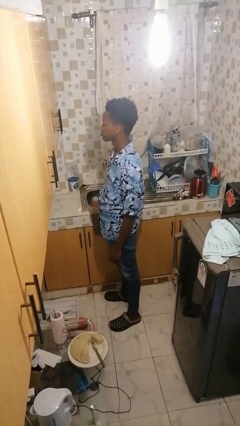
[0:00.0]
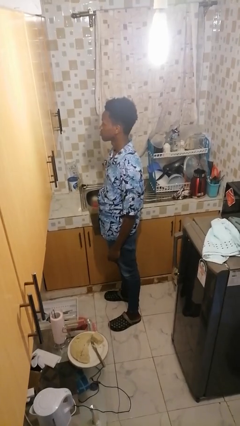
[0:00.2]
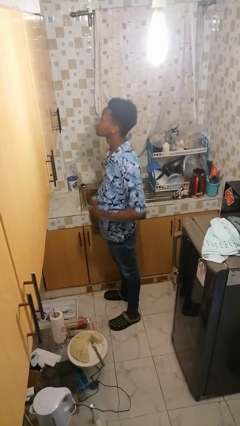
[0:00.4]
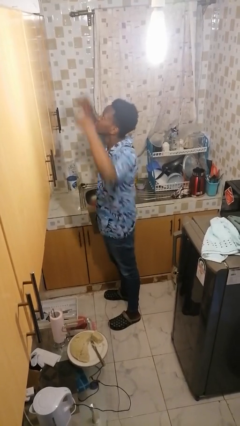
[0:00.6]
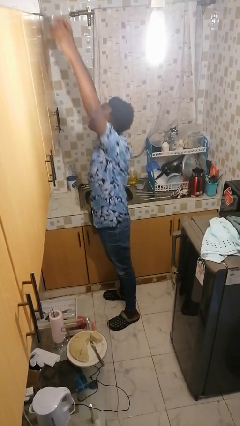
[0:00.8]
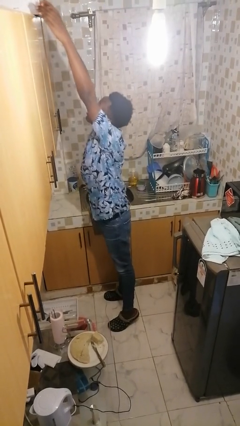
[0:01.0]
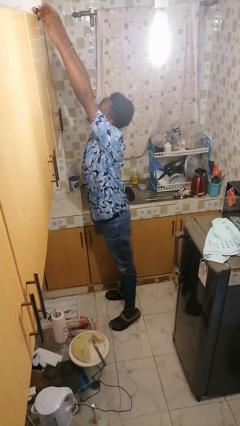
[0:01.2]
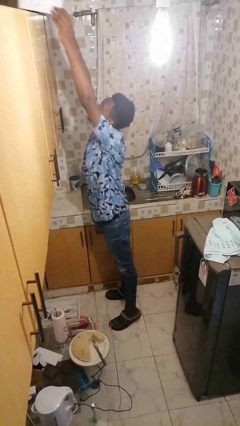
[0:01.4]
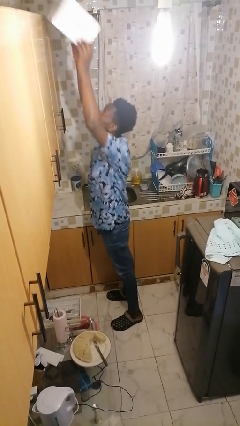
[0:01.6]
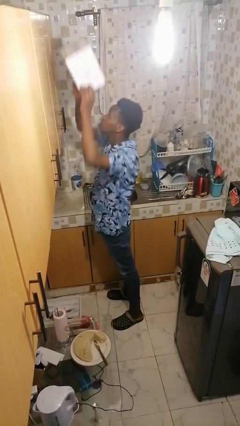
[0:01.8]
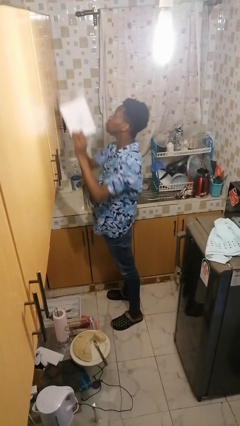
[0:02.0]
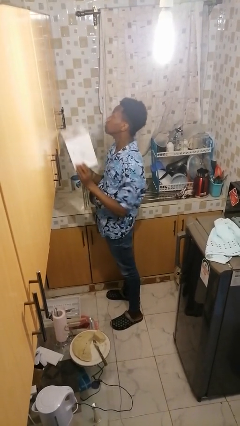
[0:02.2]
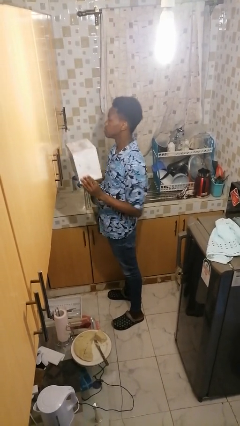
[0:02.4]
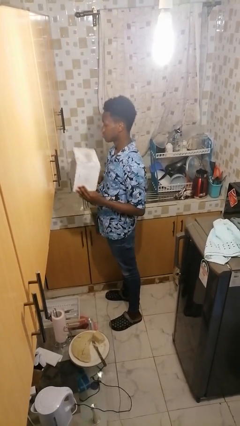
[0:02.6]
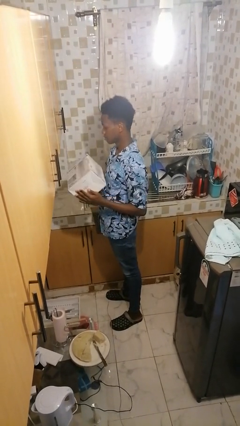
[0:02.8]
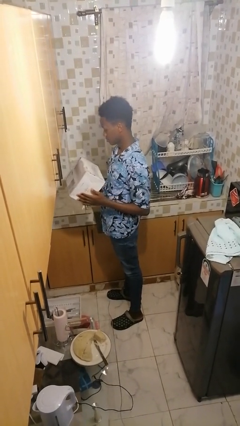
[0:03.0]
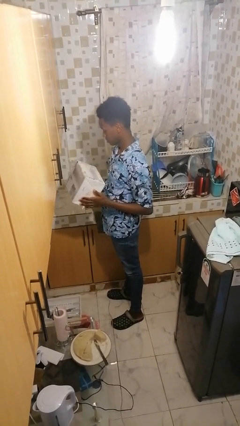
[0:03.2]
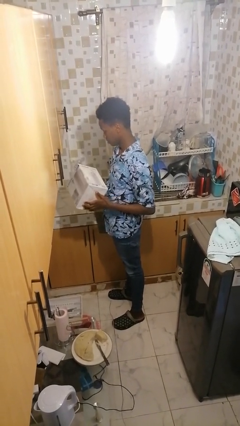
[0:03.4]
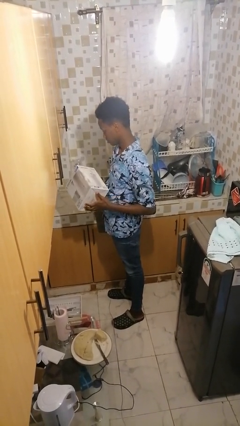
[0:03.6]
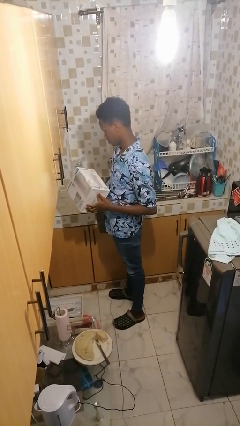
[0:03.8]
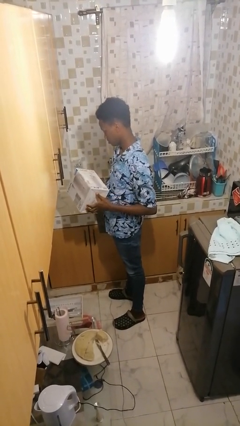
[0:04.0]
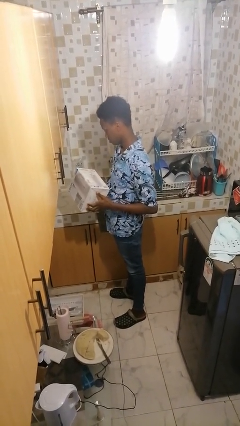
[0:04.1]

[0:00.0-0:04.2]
person picks up object from shelf

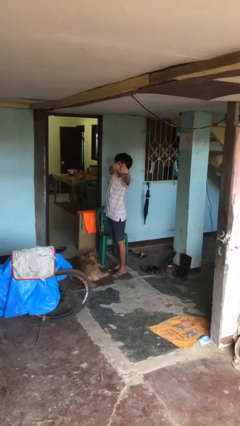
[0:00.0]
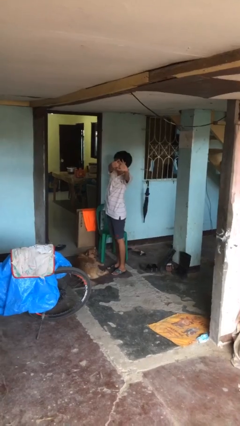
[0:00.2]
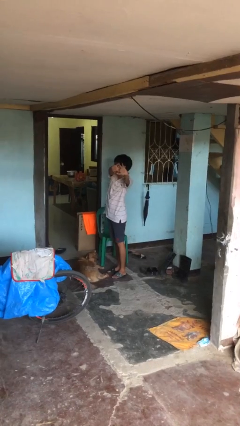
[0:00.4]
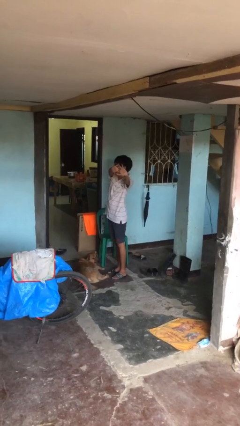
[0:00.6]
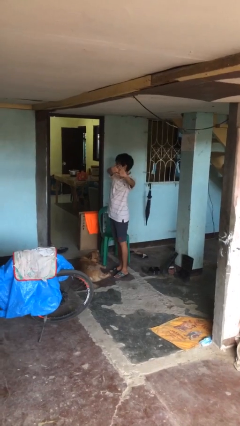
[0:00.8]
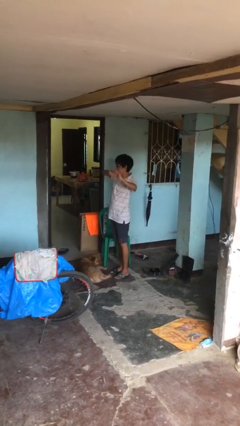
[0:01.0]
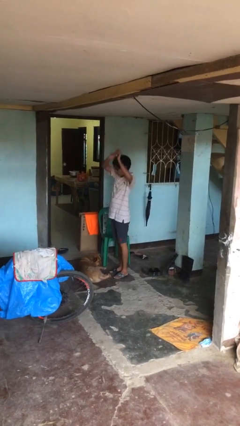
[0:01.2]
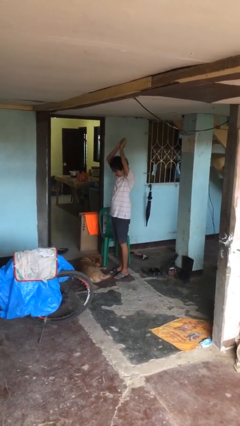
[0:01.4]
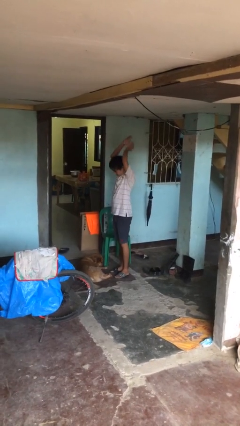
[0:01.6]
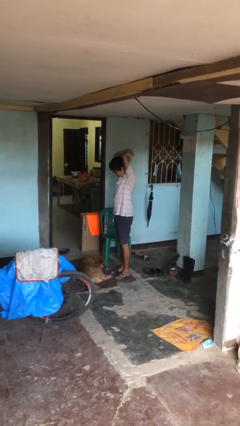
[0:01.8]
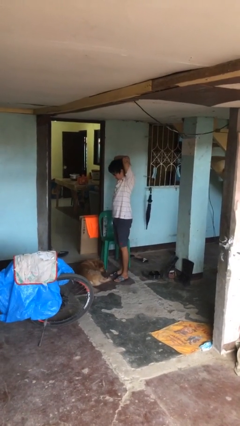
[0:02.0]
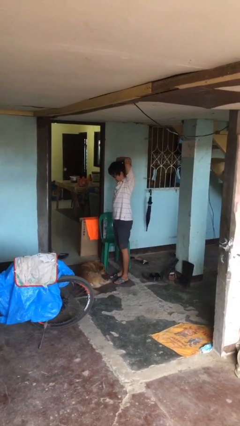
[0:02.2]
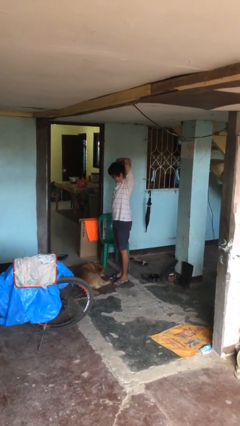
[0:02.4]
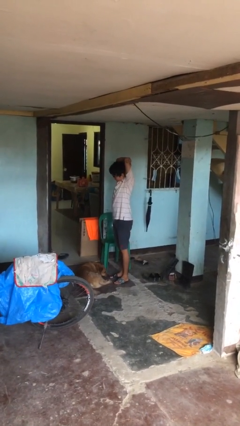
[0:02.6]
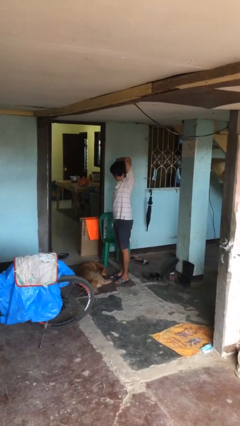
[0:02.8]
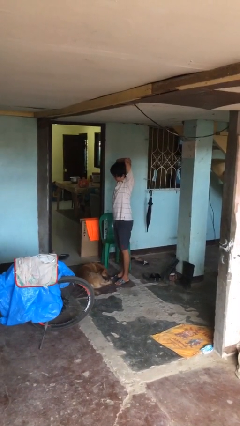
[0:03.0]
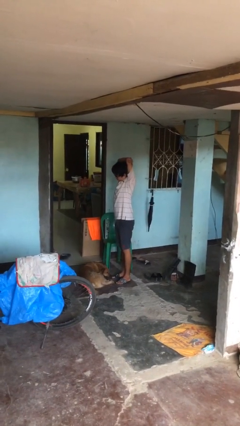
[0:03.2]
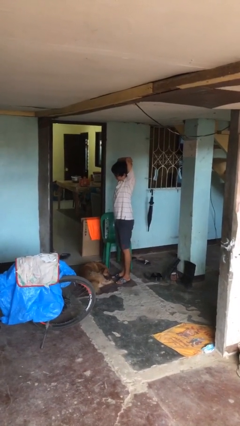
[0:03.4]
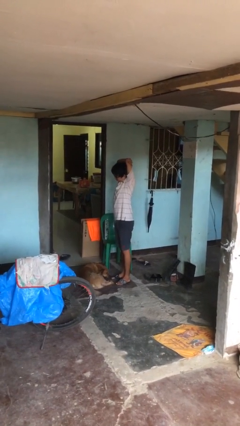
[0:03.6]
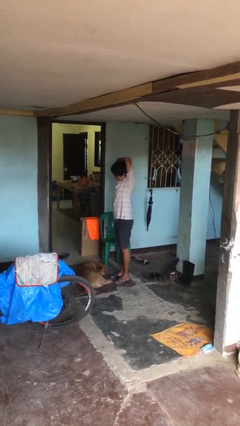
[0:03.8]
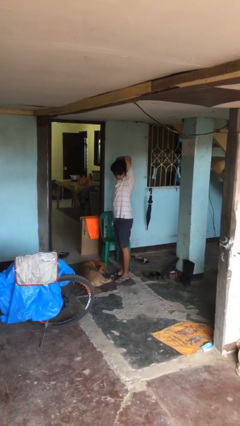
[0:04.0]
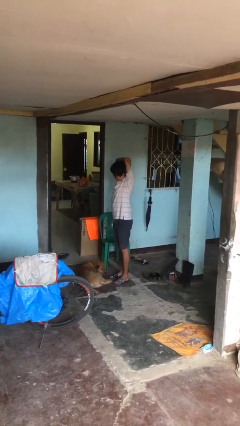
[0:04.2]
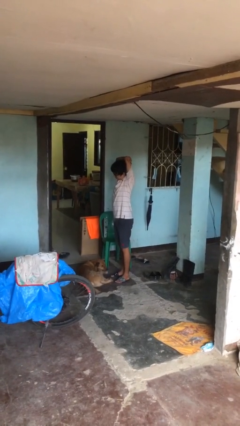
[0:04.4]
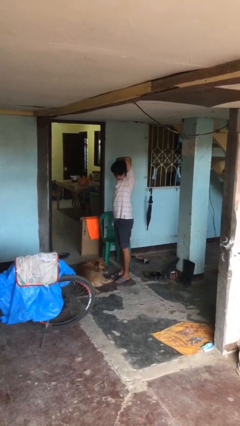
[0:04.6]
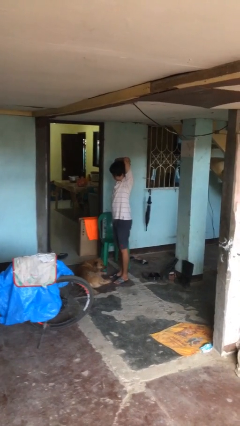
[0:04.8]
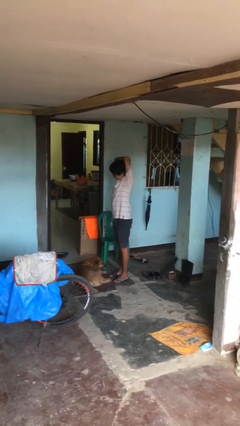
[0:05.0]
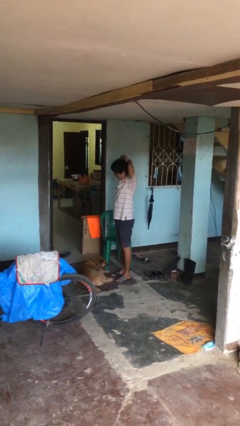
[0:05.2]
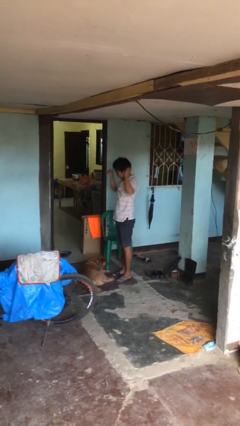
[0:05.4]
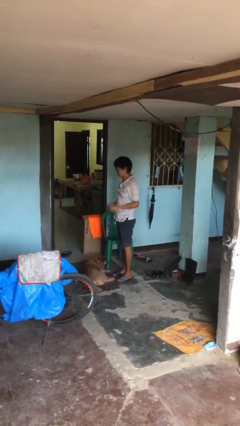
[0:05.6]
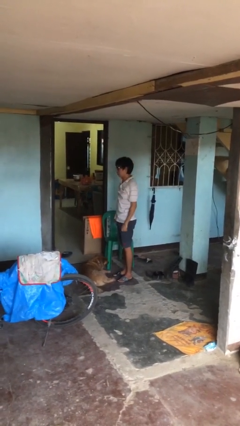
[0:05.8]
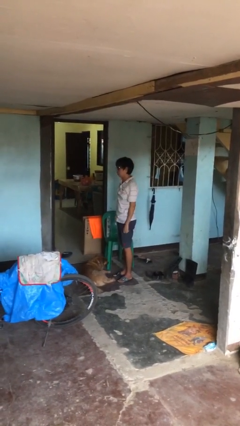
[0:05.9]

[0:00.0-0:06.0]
person stretches arms over head

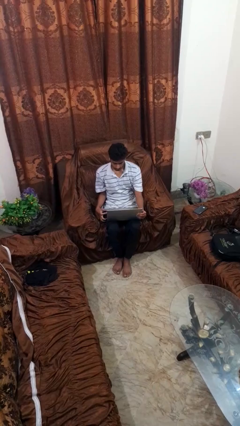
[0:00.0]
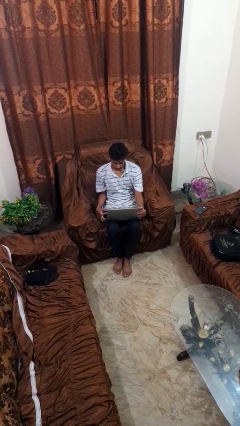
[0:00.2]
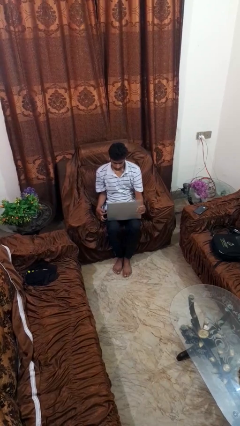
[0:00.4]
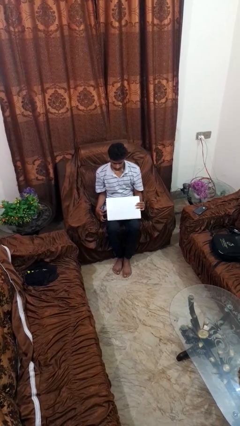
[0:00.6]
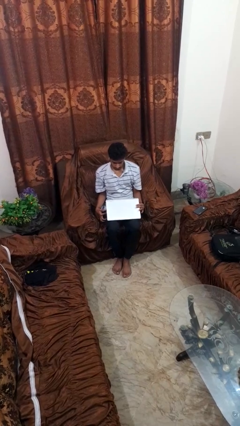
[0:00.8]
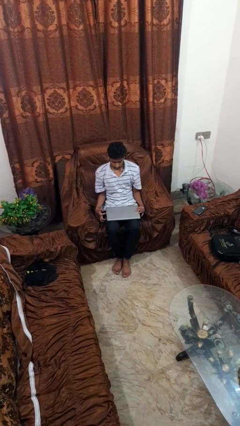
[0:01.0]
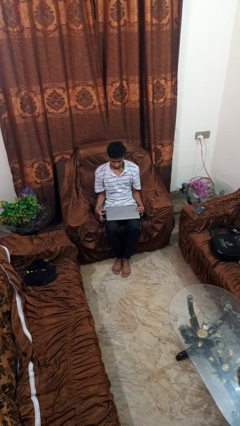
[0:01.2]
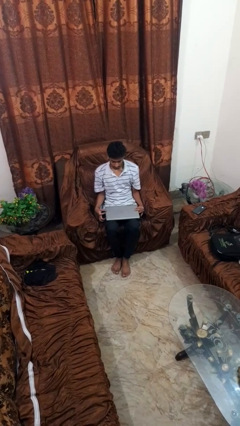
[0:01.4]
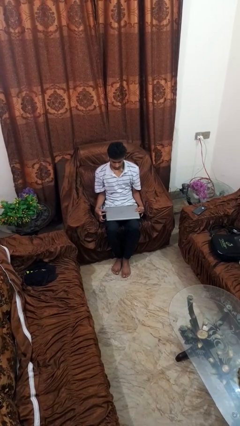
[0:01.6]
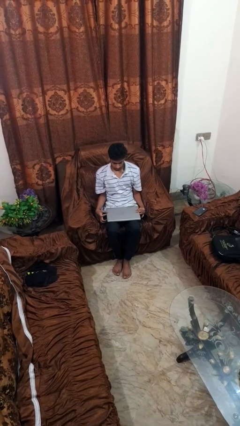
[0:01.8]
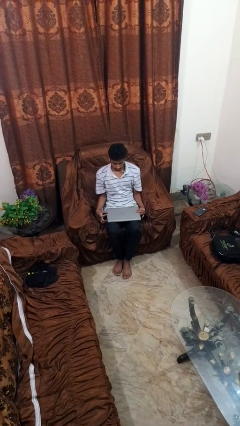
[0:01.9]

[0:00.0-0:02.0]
person closes laptop

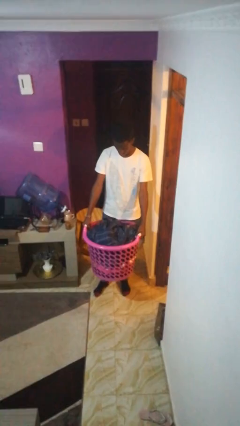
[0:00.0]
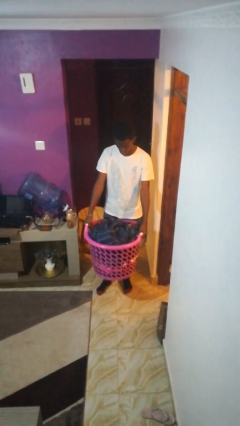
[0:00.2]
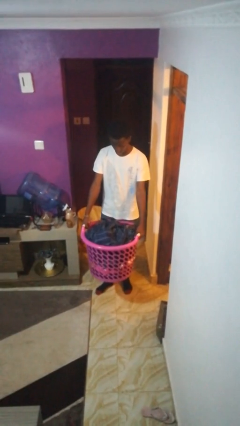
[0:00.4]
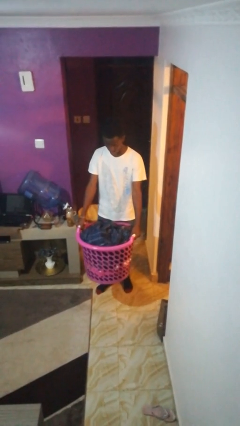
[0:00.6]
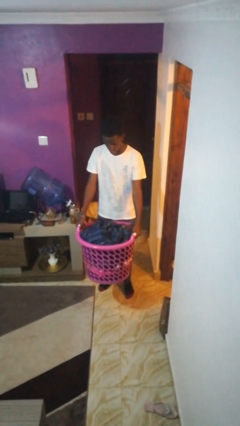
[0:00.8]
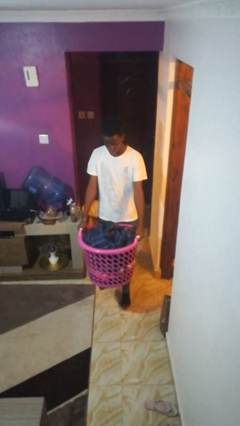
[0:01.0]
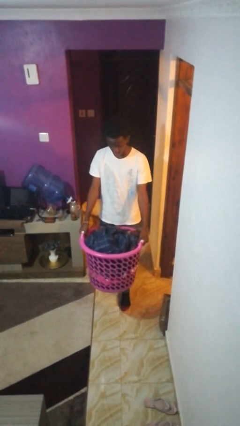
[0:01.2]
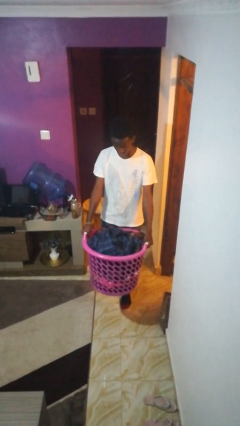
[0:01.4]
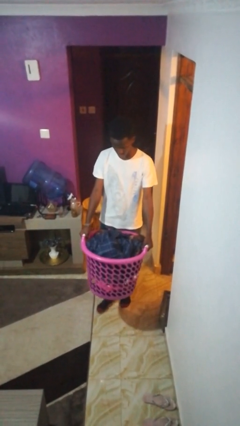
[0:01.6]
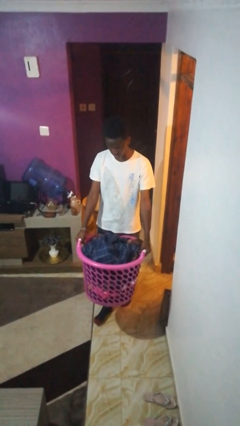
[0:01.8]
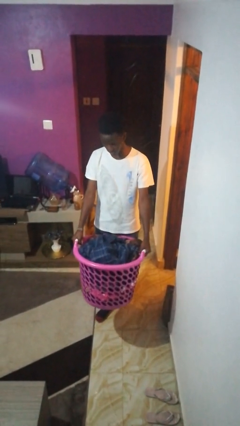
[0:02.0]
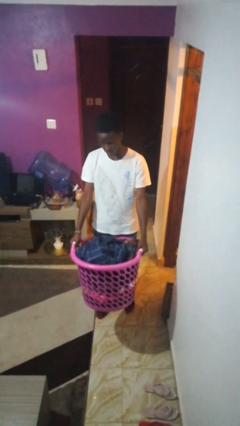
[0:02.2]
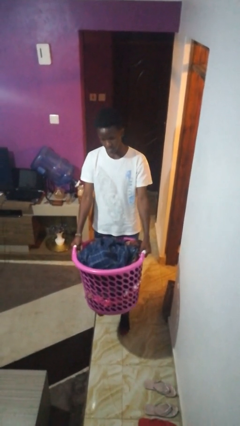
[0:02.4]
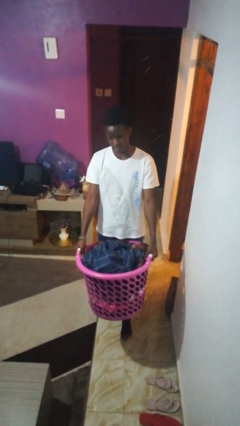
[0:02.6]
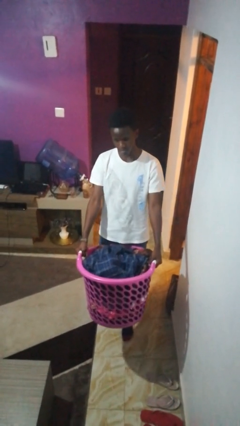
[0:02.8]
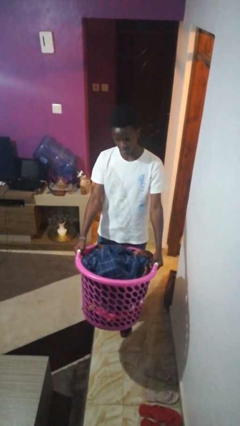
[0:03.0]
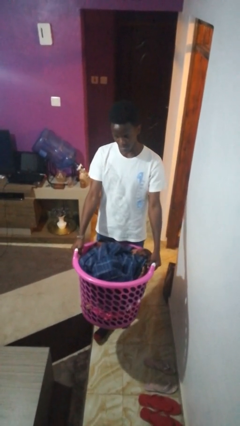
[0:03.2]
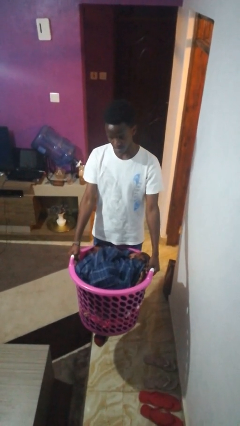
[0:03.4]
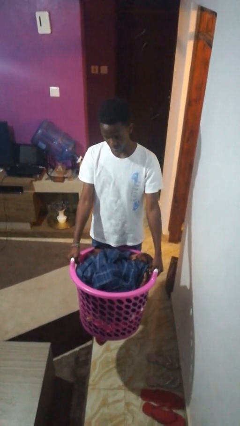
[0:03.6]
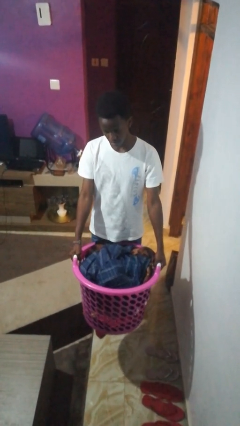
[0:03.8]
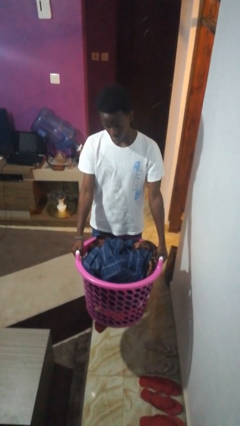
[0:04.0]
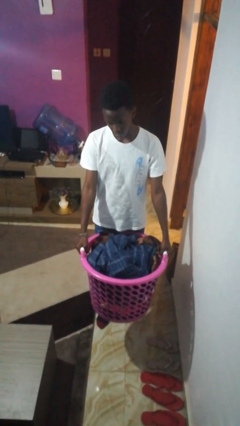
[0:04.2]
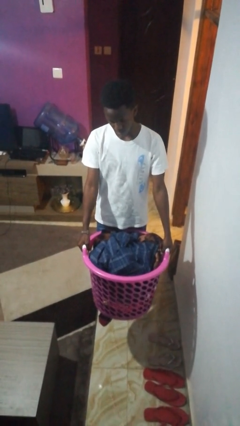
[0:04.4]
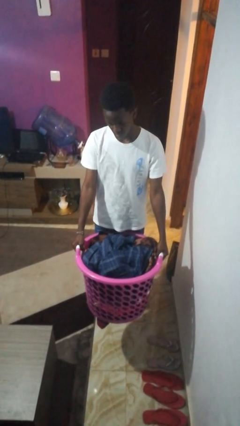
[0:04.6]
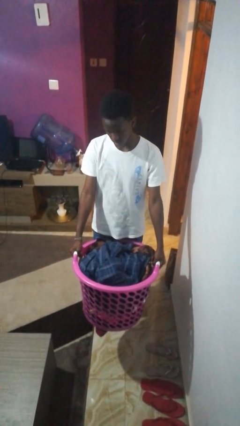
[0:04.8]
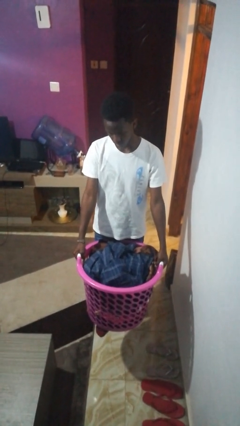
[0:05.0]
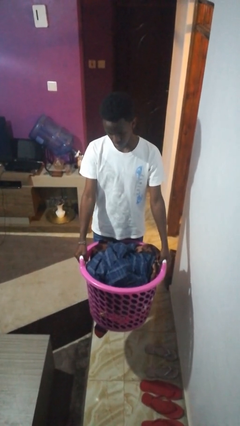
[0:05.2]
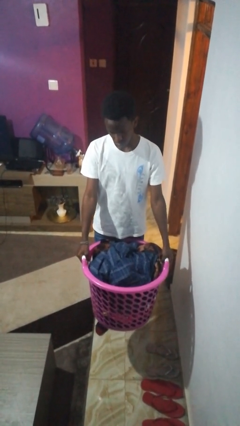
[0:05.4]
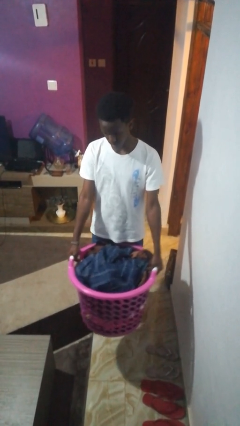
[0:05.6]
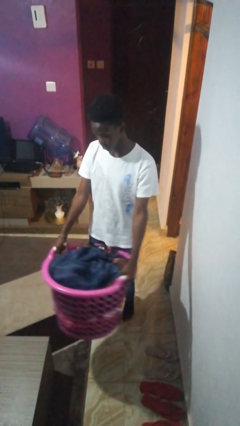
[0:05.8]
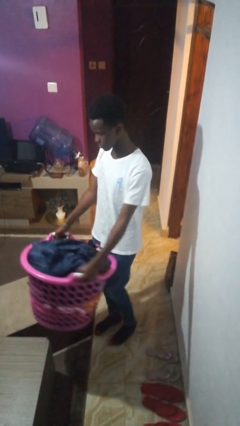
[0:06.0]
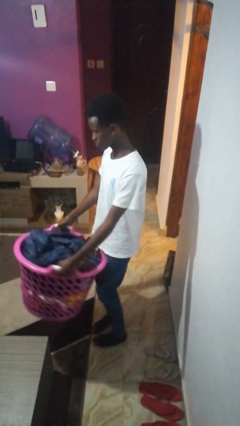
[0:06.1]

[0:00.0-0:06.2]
person carries laundry basket
